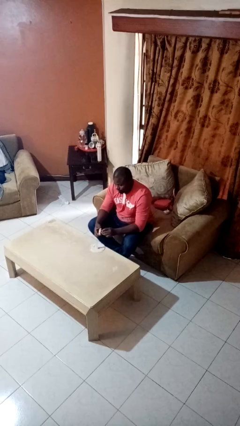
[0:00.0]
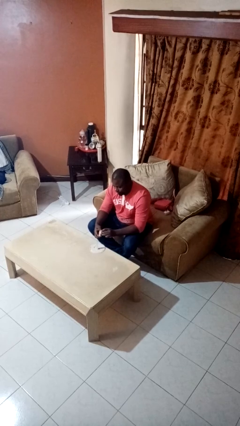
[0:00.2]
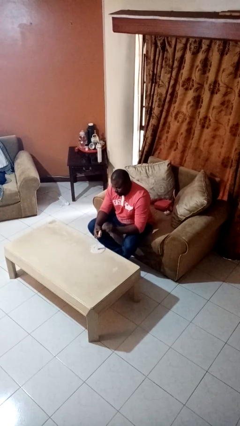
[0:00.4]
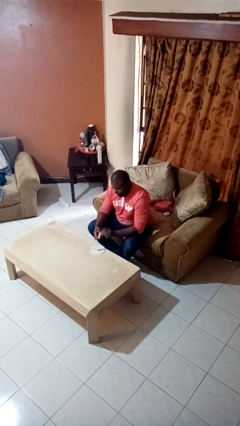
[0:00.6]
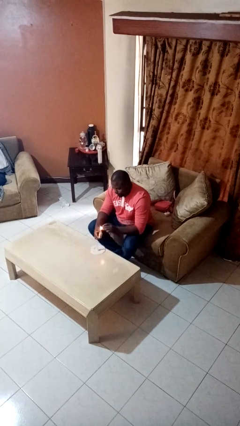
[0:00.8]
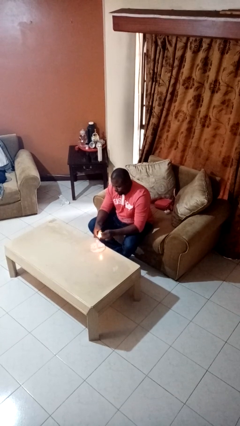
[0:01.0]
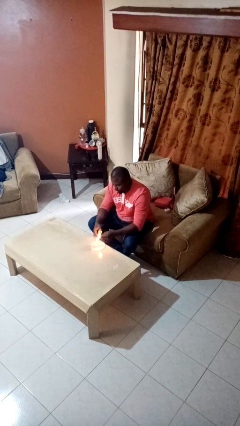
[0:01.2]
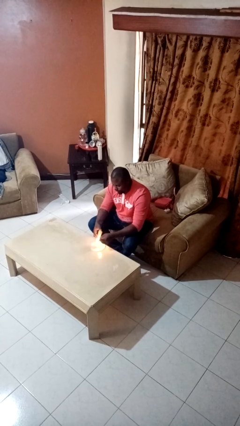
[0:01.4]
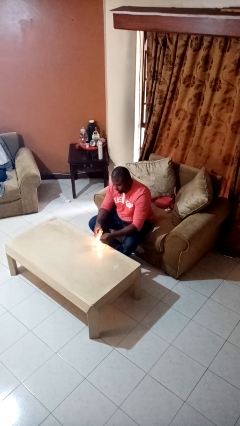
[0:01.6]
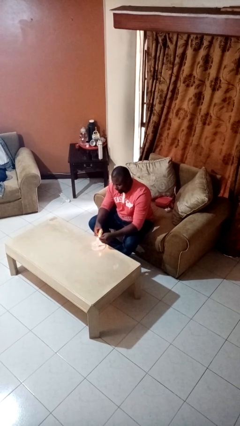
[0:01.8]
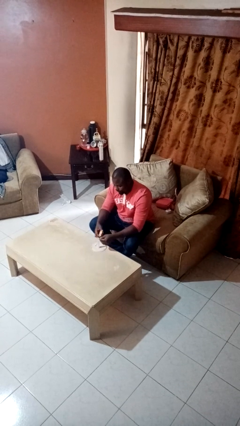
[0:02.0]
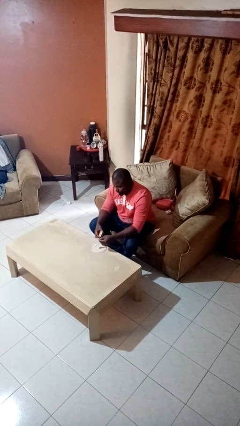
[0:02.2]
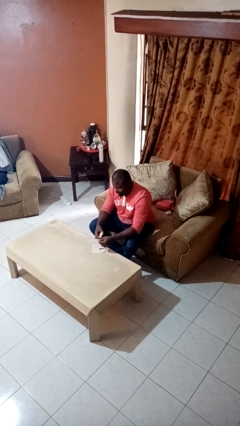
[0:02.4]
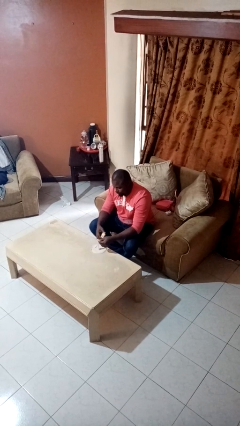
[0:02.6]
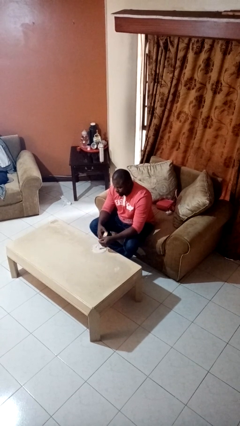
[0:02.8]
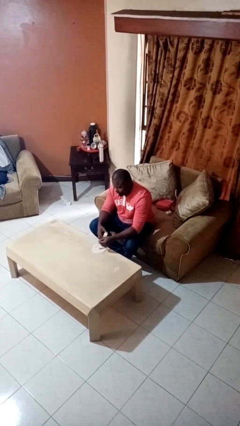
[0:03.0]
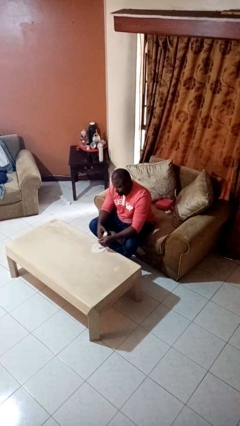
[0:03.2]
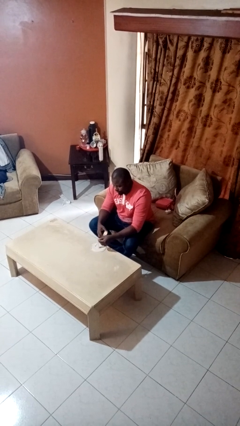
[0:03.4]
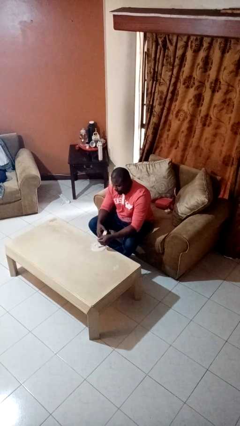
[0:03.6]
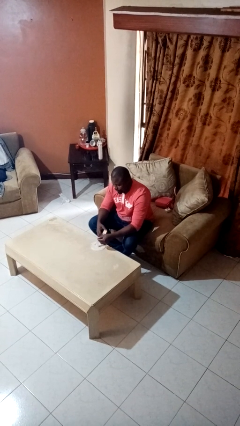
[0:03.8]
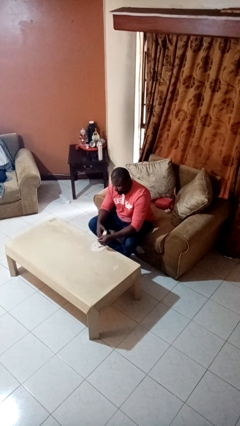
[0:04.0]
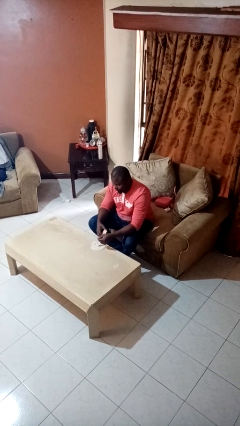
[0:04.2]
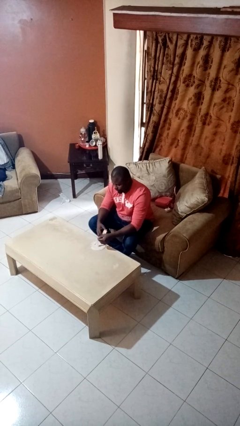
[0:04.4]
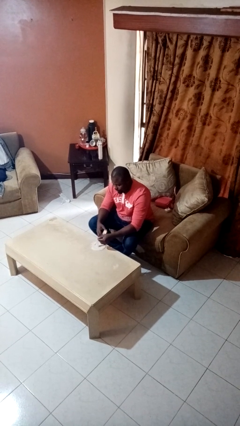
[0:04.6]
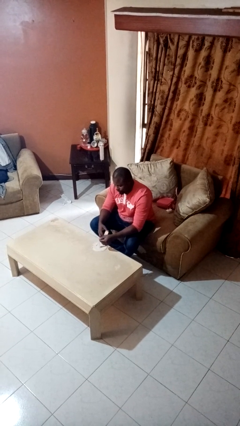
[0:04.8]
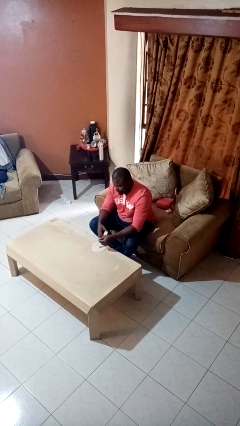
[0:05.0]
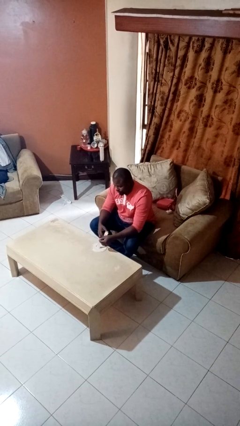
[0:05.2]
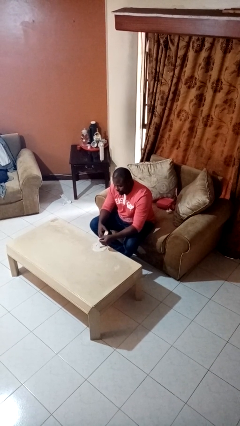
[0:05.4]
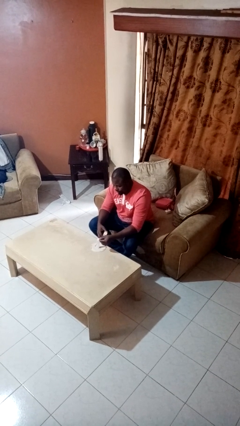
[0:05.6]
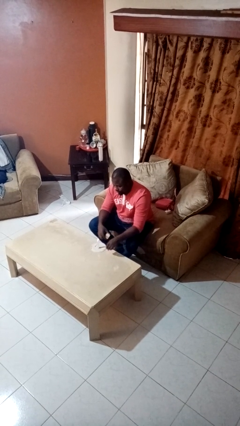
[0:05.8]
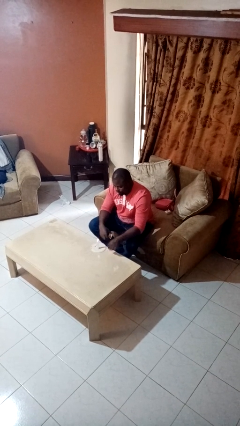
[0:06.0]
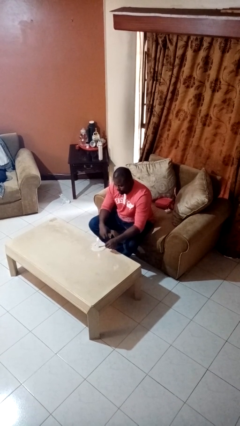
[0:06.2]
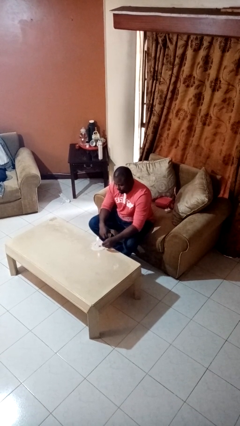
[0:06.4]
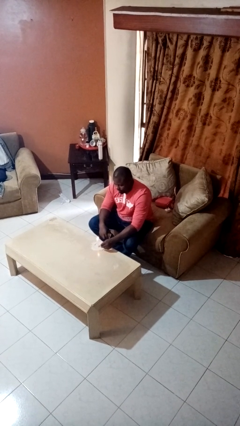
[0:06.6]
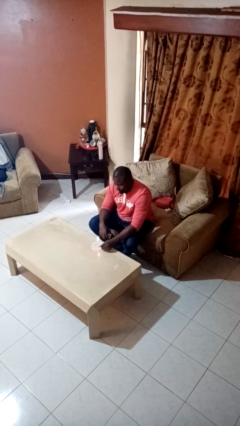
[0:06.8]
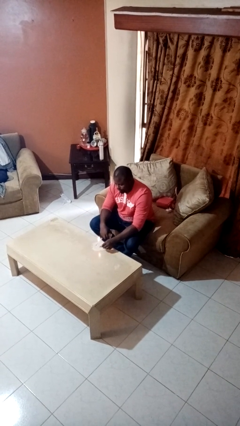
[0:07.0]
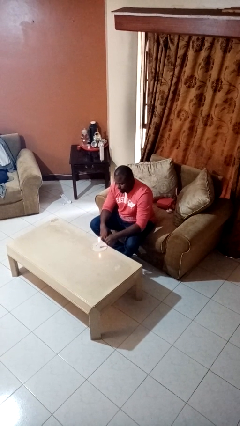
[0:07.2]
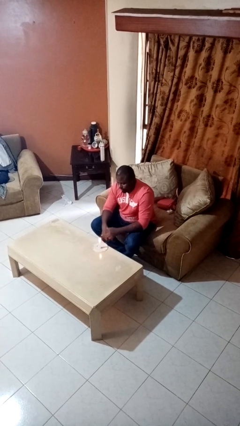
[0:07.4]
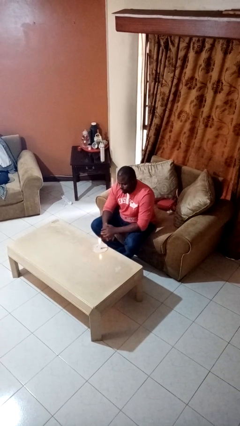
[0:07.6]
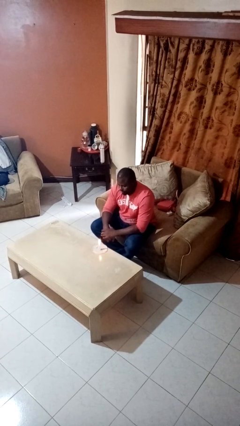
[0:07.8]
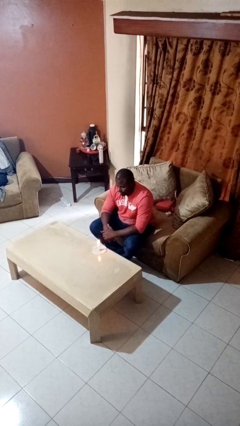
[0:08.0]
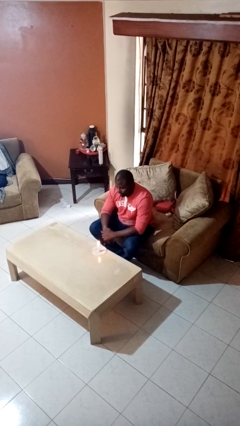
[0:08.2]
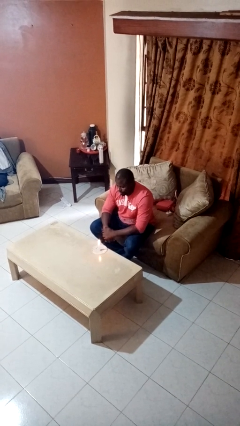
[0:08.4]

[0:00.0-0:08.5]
person lights candle

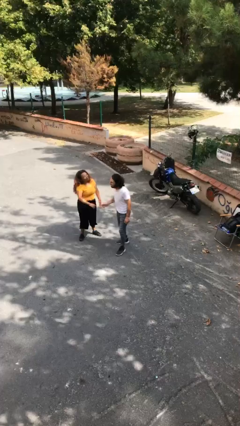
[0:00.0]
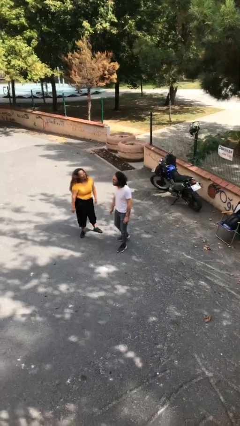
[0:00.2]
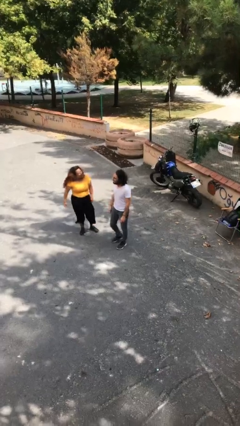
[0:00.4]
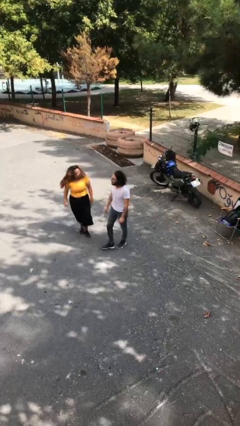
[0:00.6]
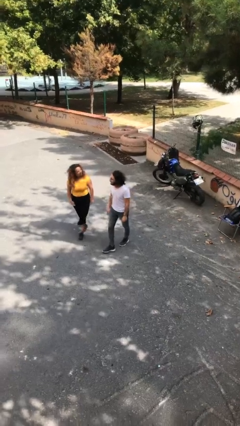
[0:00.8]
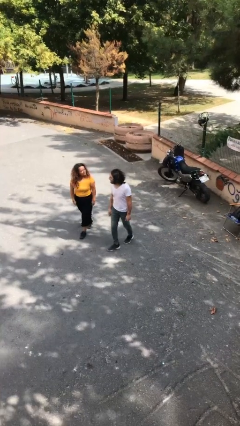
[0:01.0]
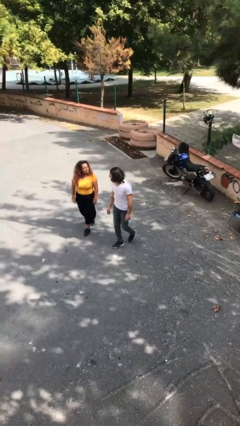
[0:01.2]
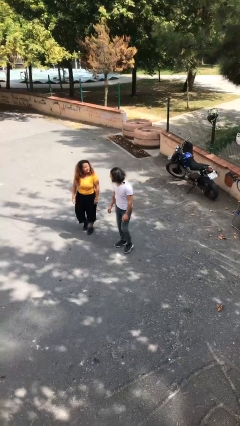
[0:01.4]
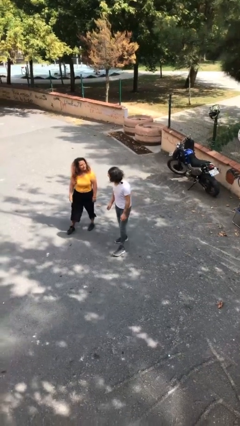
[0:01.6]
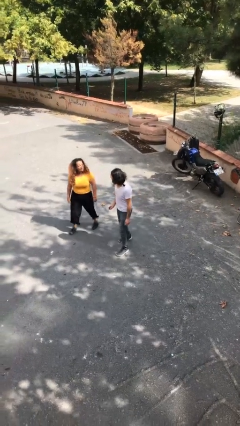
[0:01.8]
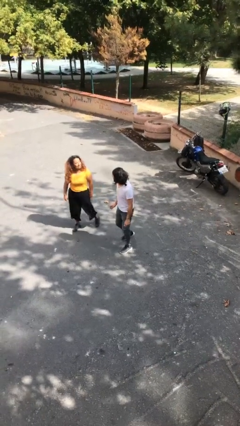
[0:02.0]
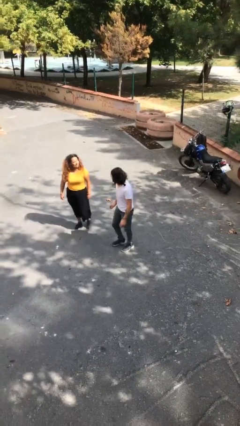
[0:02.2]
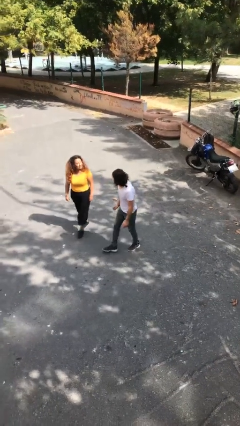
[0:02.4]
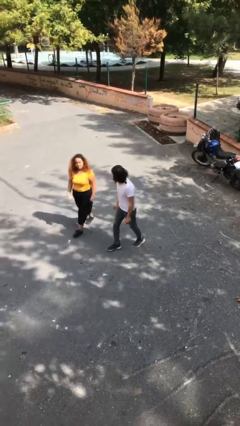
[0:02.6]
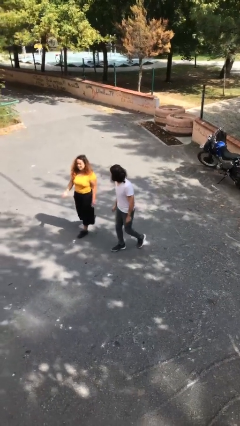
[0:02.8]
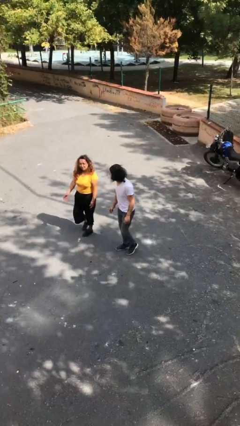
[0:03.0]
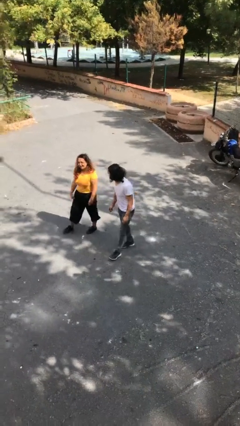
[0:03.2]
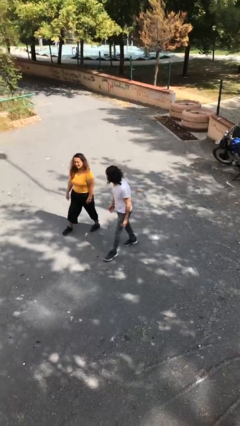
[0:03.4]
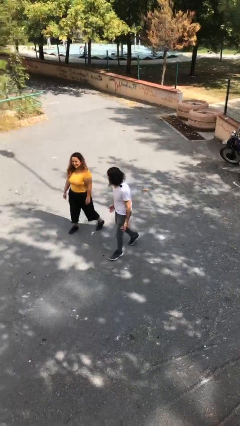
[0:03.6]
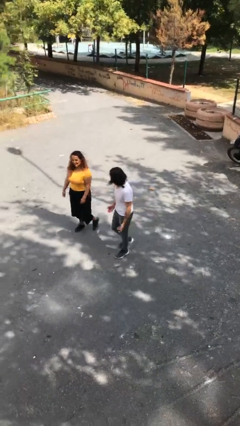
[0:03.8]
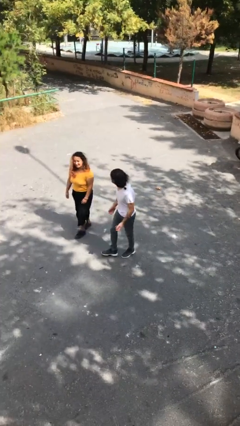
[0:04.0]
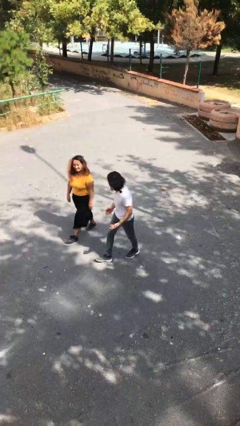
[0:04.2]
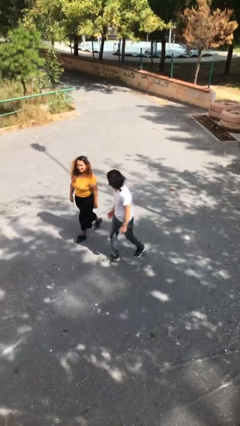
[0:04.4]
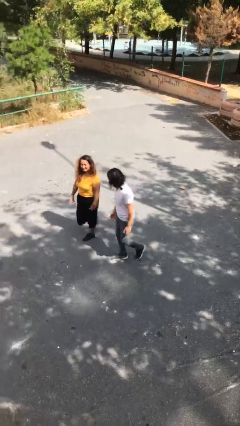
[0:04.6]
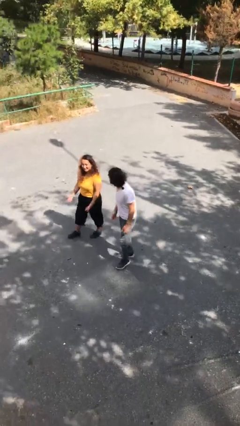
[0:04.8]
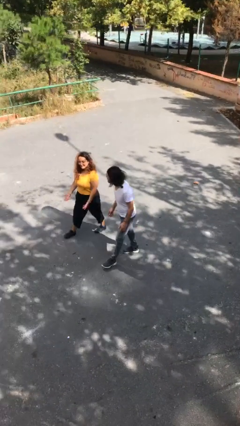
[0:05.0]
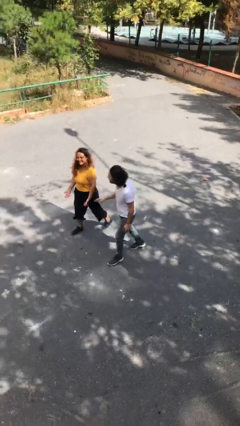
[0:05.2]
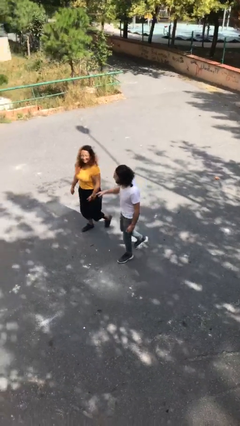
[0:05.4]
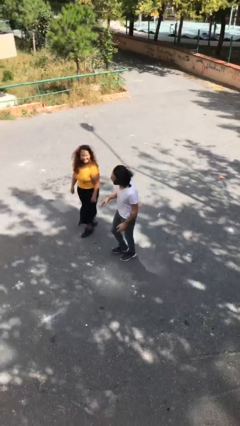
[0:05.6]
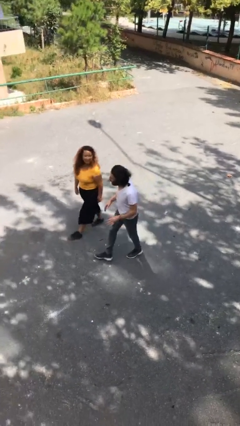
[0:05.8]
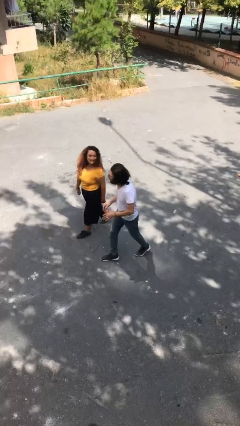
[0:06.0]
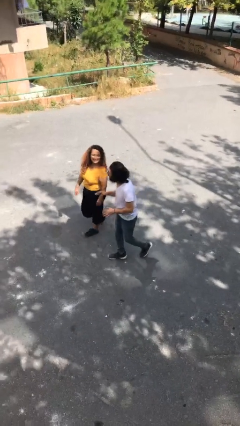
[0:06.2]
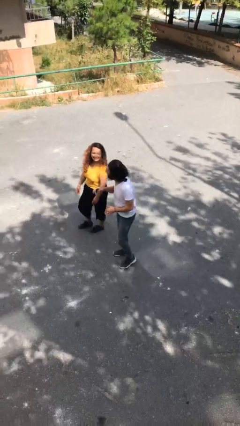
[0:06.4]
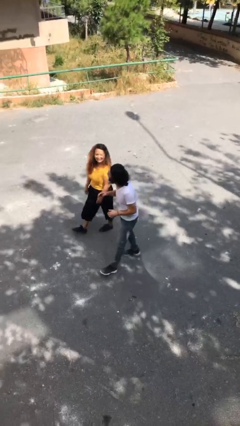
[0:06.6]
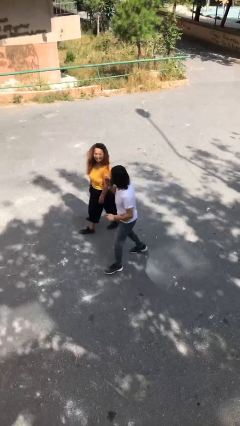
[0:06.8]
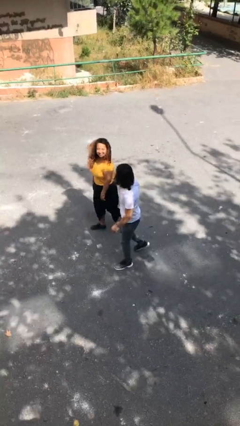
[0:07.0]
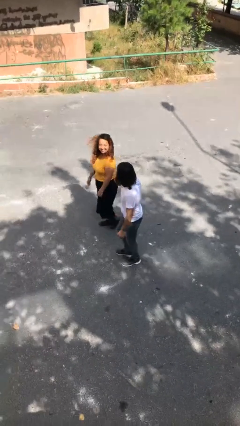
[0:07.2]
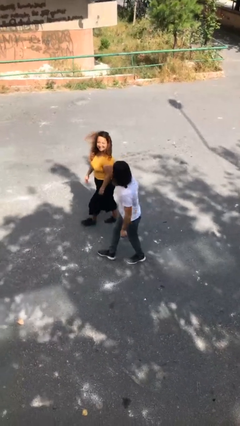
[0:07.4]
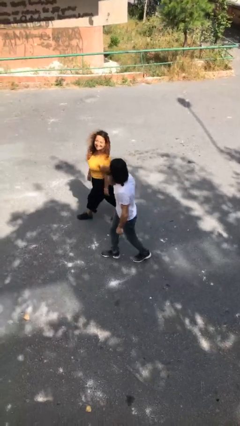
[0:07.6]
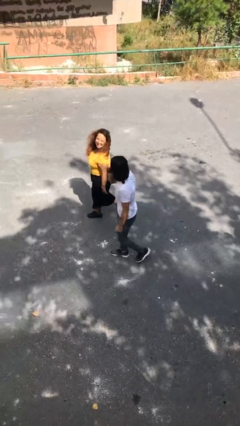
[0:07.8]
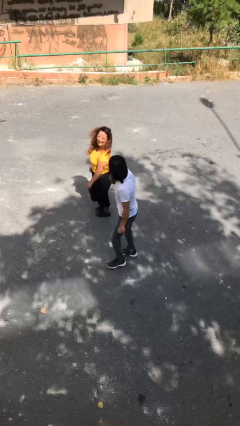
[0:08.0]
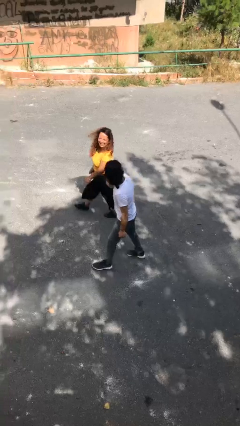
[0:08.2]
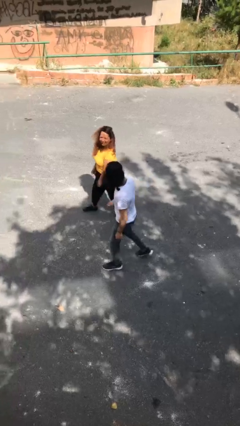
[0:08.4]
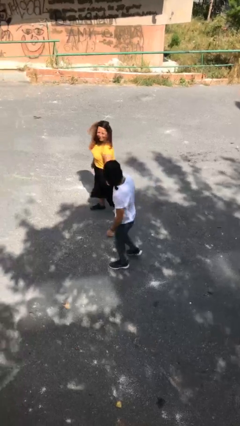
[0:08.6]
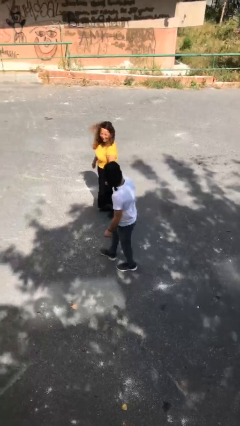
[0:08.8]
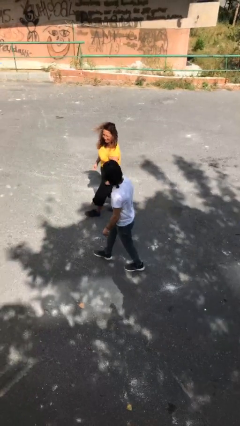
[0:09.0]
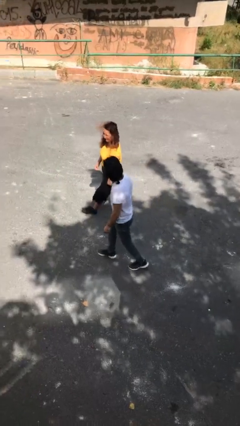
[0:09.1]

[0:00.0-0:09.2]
person talks to person

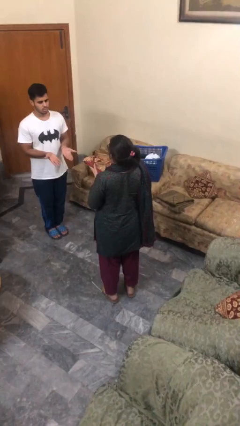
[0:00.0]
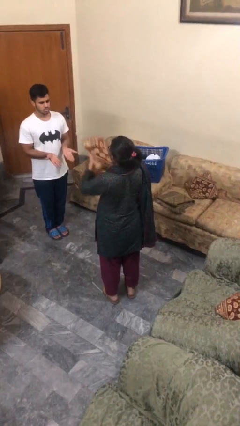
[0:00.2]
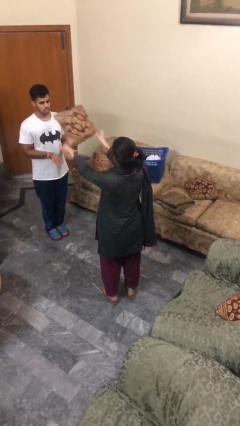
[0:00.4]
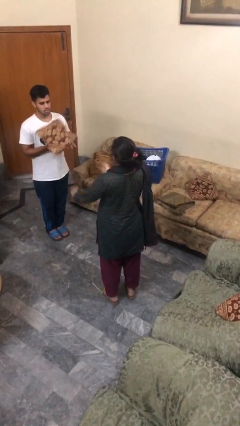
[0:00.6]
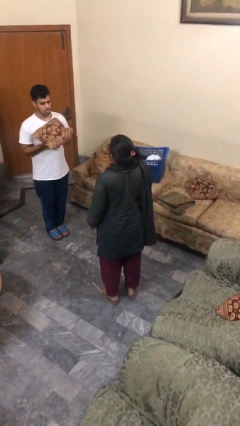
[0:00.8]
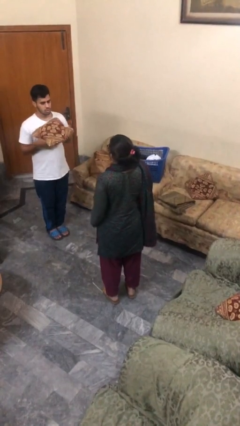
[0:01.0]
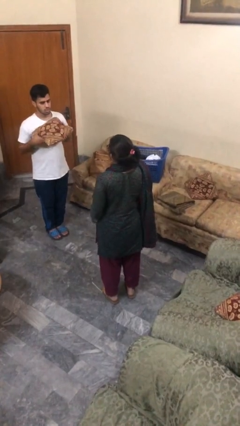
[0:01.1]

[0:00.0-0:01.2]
person throws object to person
